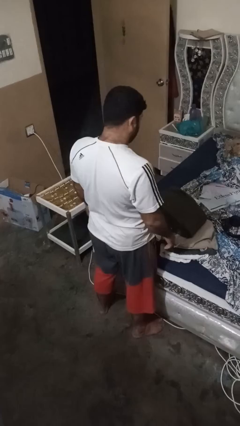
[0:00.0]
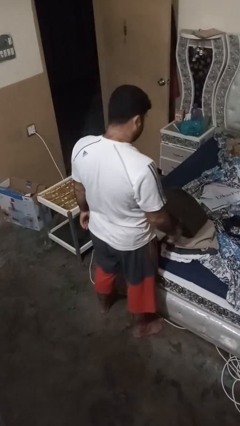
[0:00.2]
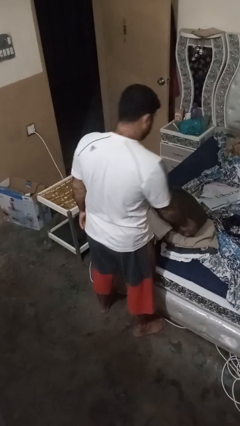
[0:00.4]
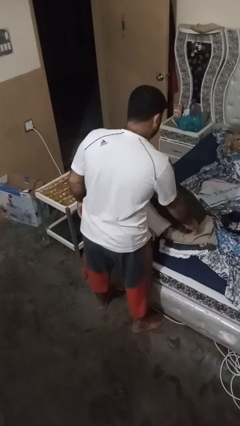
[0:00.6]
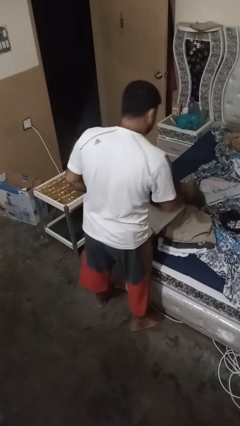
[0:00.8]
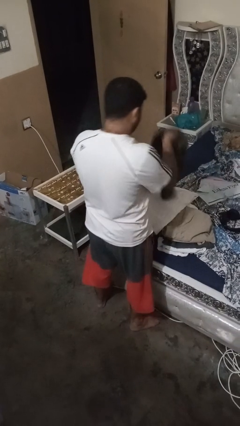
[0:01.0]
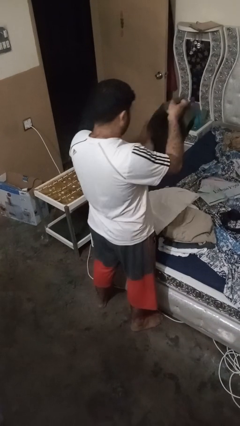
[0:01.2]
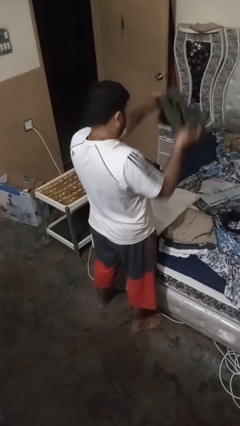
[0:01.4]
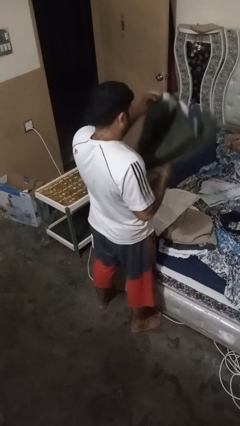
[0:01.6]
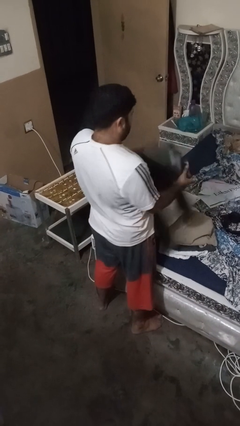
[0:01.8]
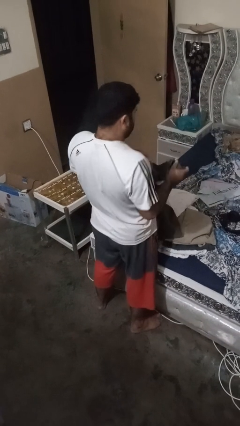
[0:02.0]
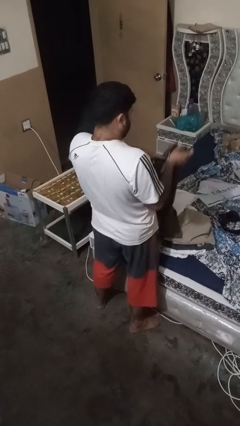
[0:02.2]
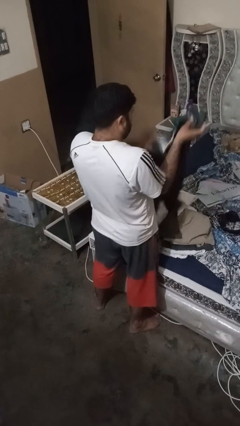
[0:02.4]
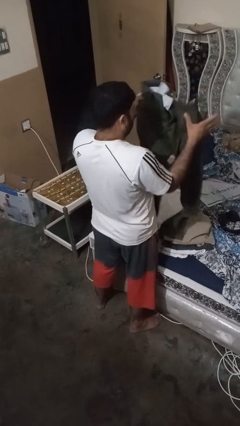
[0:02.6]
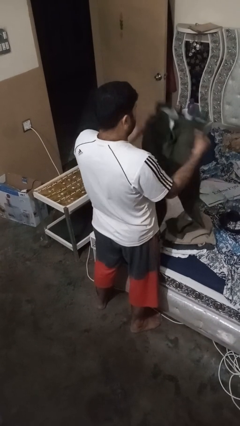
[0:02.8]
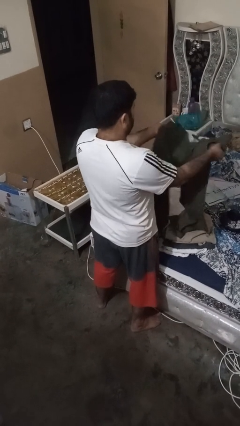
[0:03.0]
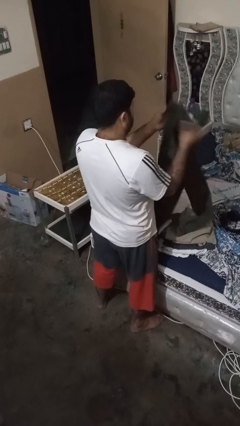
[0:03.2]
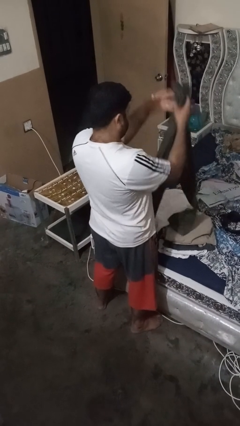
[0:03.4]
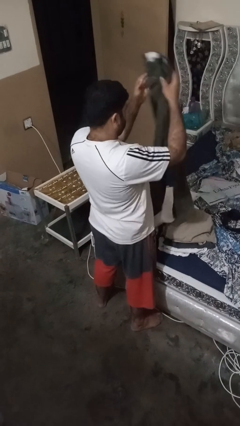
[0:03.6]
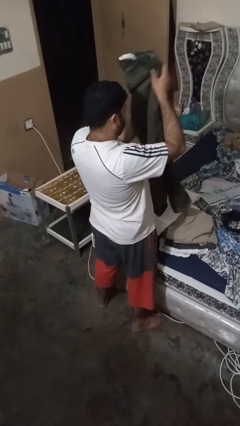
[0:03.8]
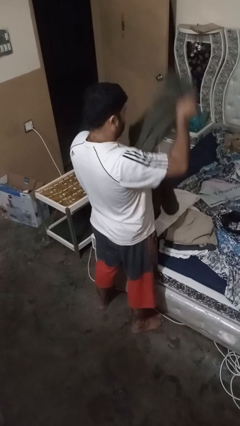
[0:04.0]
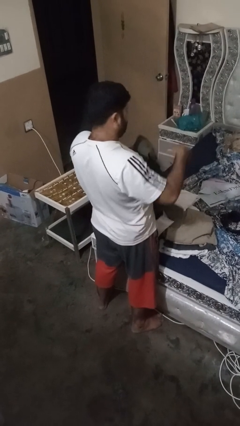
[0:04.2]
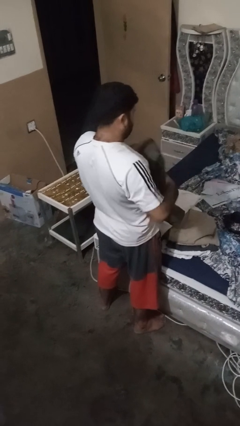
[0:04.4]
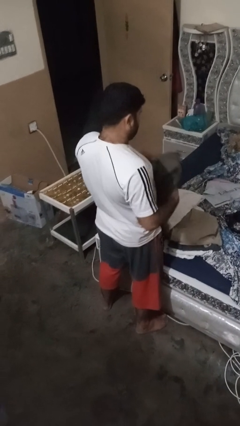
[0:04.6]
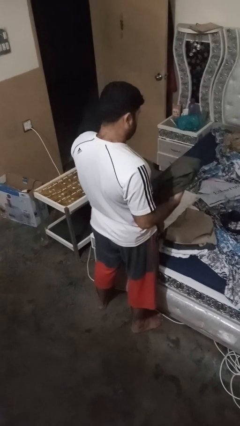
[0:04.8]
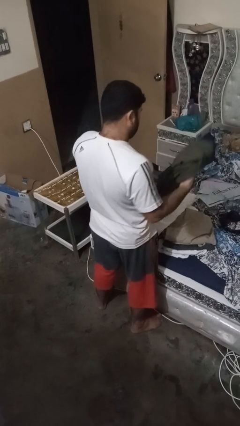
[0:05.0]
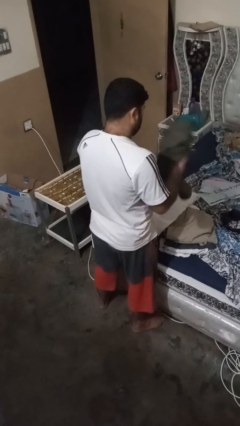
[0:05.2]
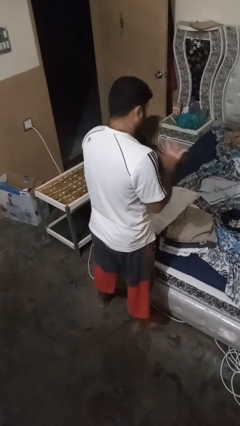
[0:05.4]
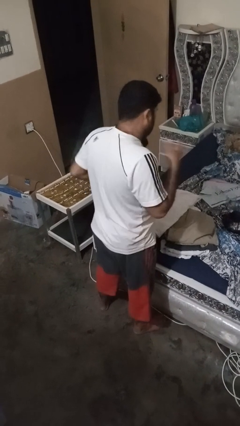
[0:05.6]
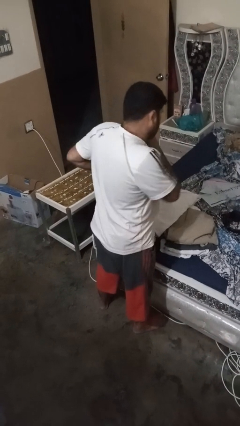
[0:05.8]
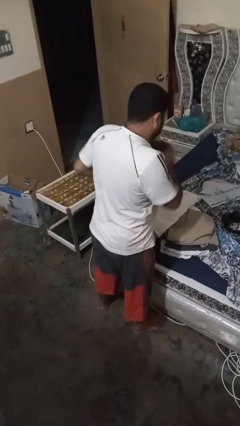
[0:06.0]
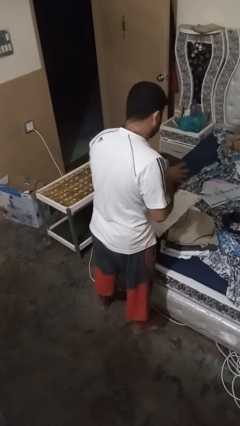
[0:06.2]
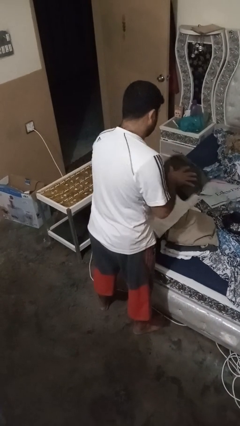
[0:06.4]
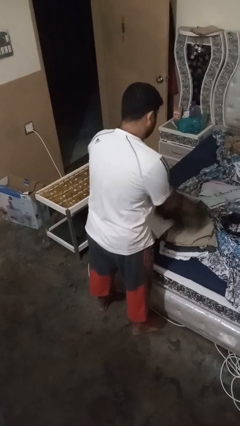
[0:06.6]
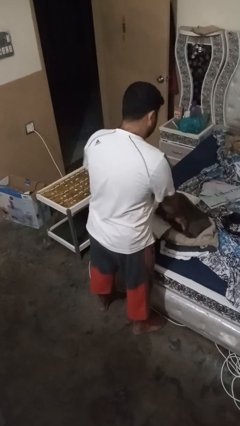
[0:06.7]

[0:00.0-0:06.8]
person folds pants

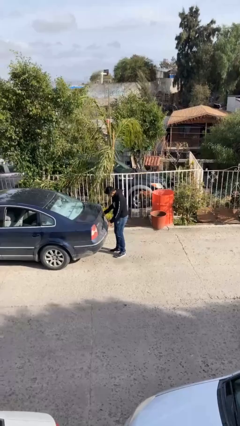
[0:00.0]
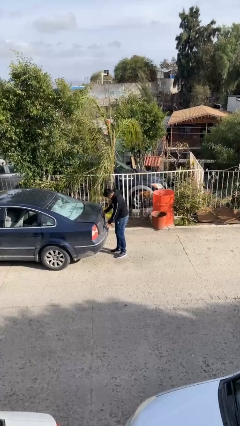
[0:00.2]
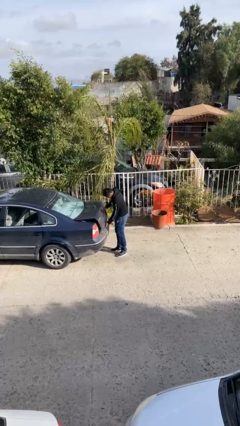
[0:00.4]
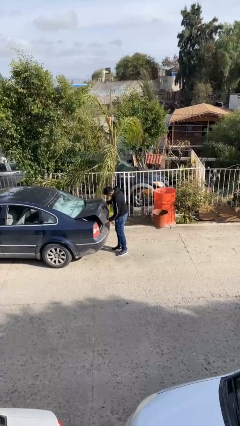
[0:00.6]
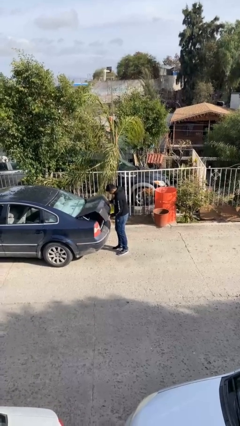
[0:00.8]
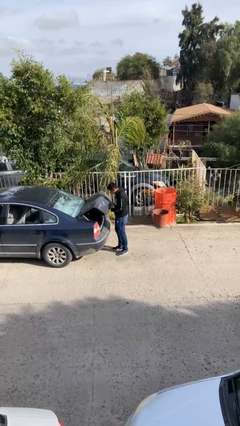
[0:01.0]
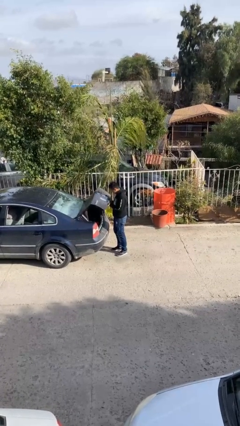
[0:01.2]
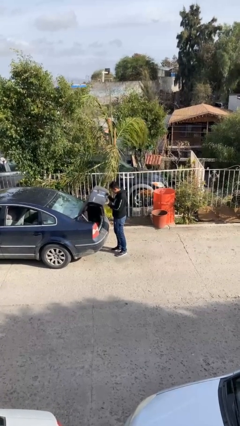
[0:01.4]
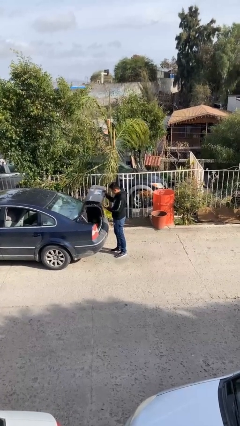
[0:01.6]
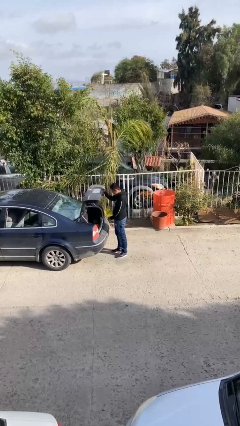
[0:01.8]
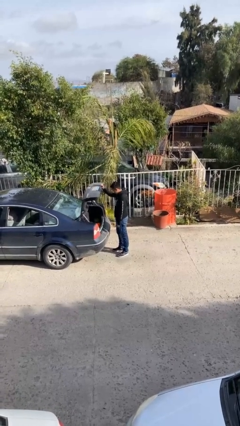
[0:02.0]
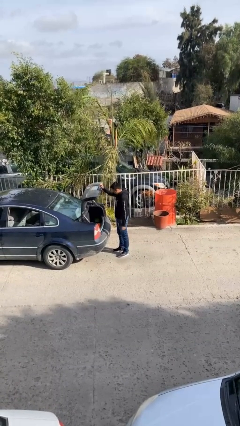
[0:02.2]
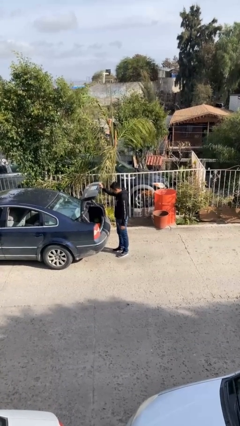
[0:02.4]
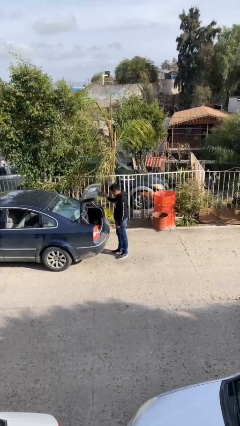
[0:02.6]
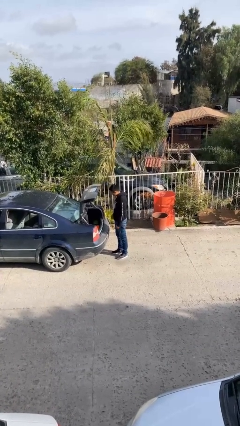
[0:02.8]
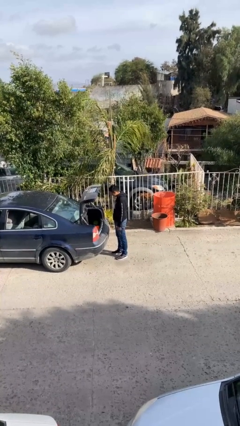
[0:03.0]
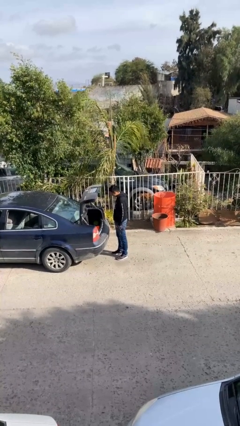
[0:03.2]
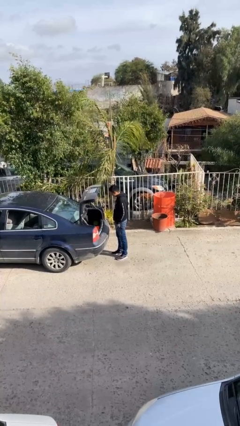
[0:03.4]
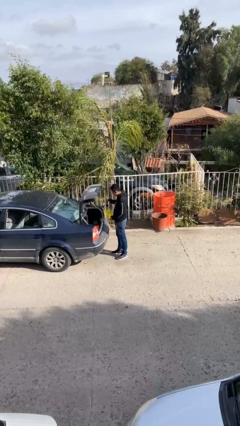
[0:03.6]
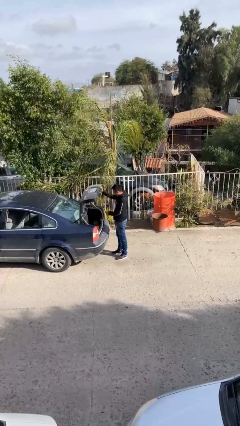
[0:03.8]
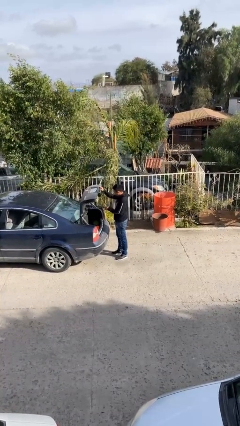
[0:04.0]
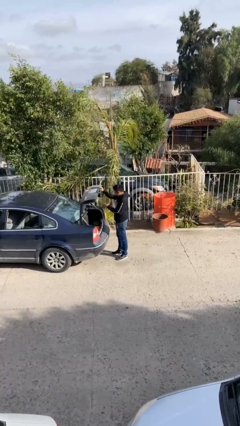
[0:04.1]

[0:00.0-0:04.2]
person opens car trunk

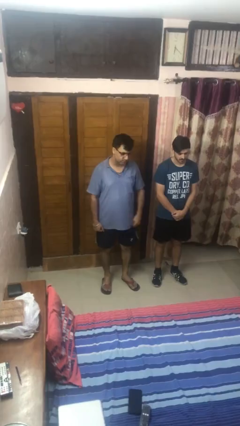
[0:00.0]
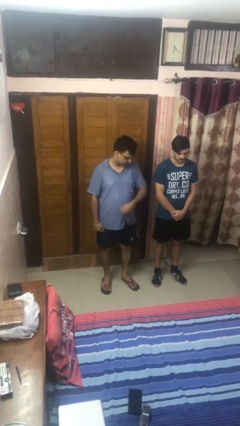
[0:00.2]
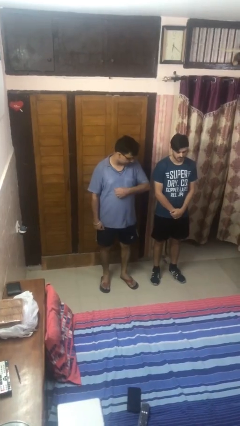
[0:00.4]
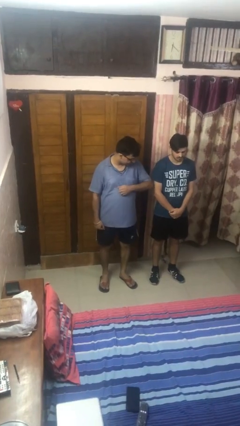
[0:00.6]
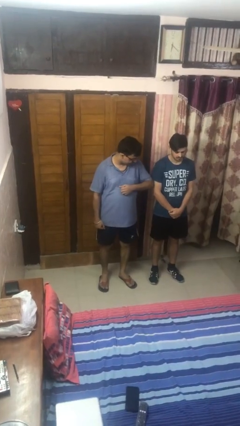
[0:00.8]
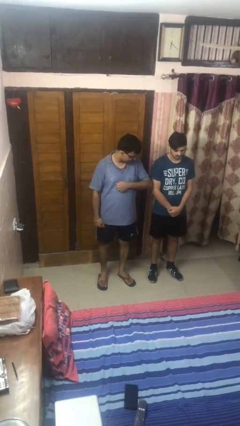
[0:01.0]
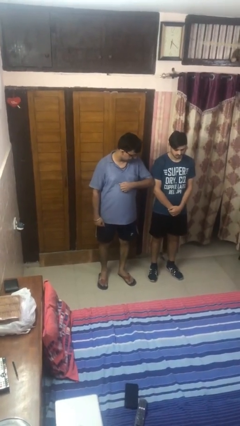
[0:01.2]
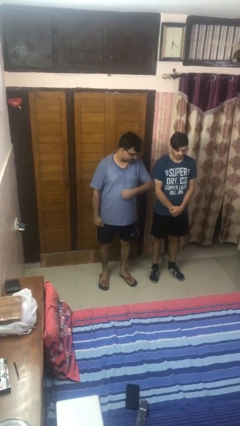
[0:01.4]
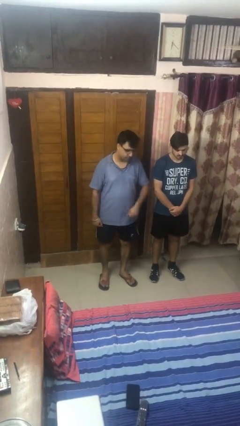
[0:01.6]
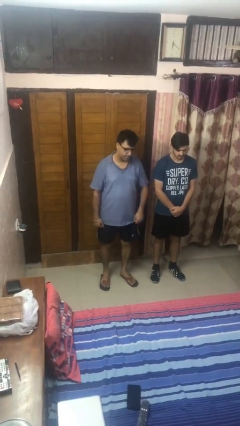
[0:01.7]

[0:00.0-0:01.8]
person nudges person with elbow

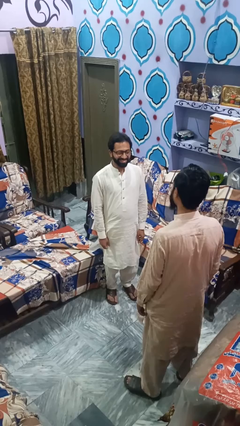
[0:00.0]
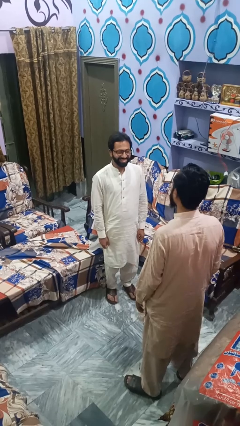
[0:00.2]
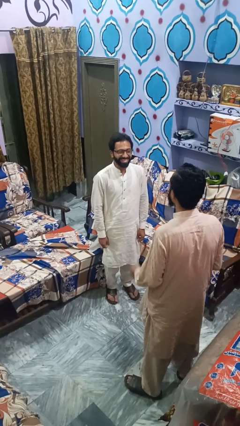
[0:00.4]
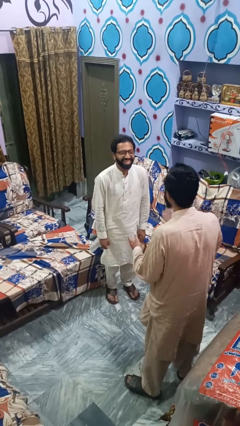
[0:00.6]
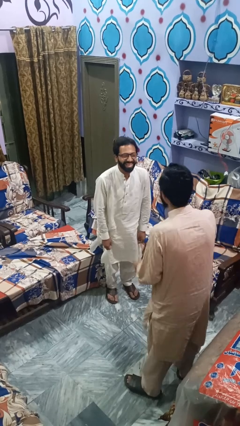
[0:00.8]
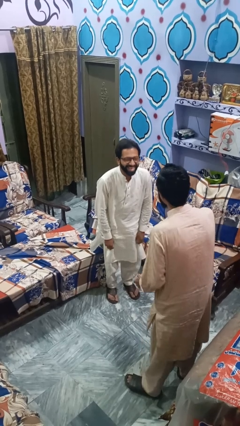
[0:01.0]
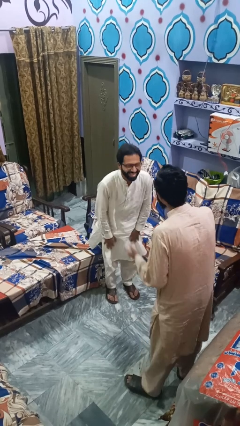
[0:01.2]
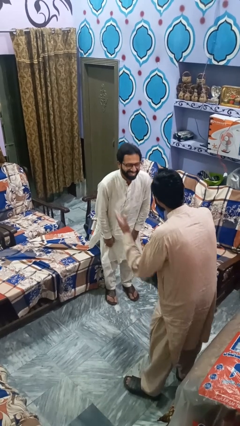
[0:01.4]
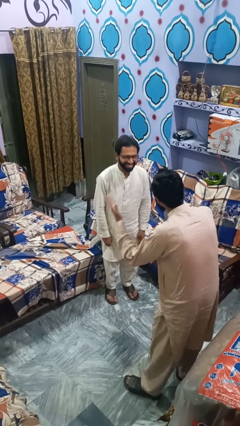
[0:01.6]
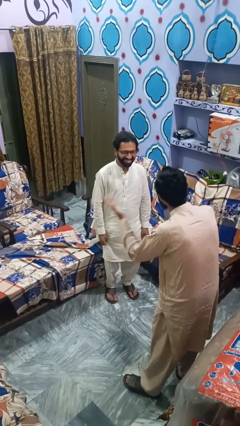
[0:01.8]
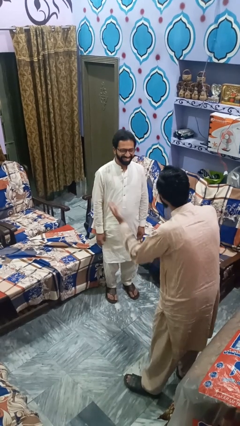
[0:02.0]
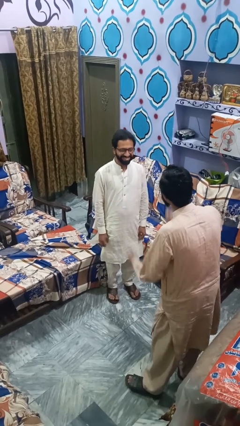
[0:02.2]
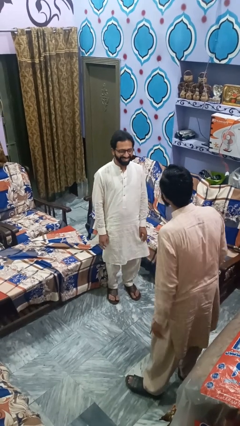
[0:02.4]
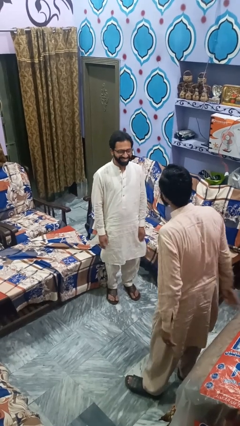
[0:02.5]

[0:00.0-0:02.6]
person laughs with person

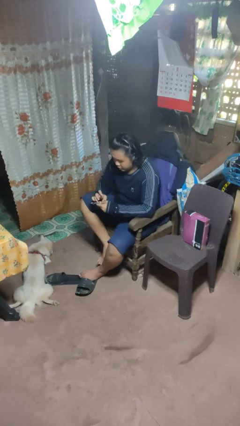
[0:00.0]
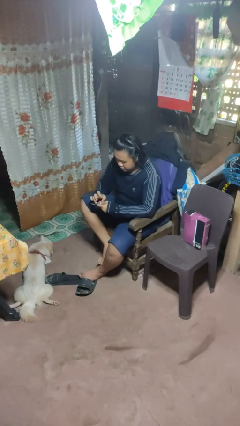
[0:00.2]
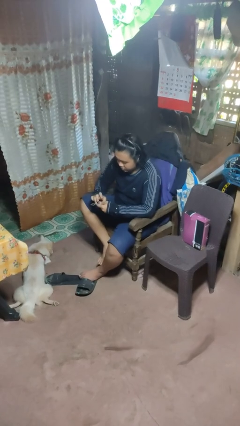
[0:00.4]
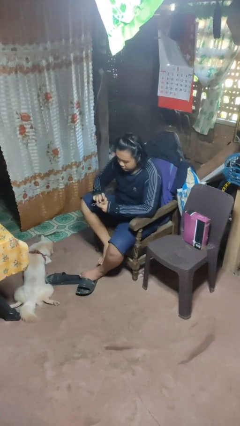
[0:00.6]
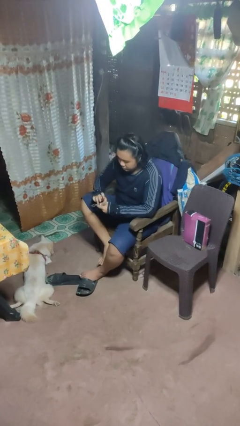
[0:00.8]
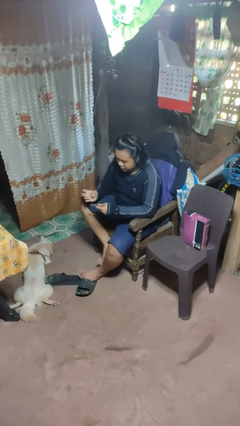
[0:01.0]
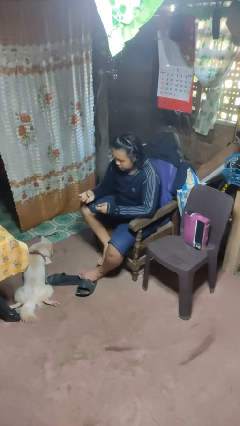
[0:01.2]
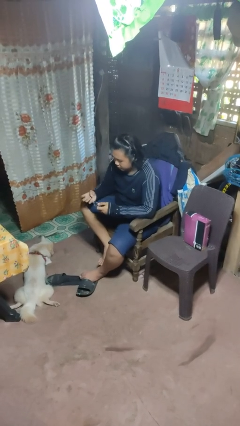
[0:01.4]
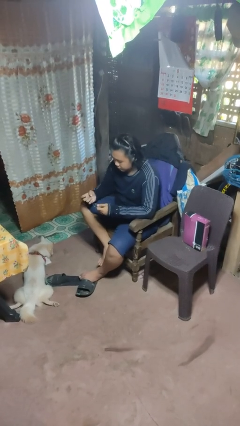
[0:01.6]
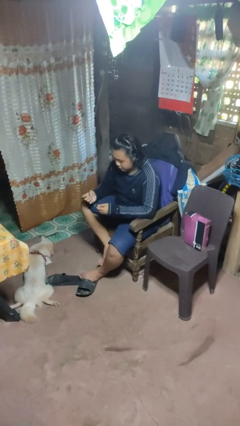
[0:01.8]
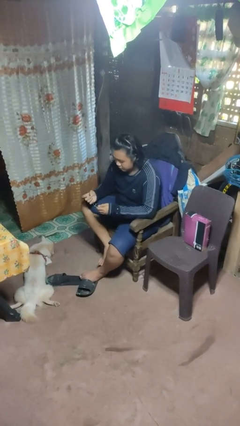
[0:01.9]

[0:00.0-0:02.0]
person files fingernails
